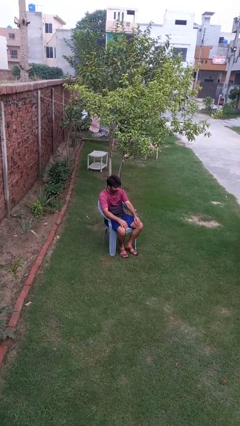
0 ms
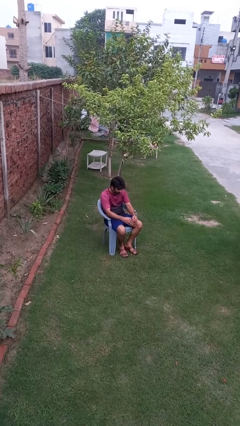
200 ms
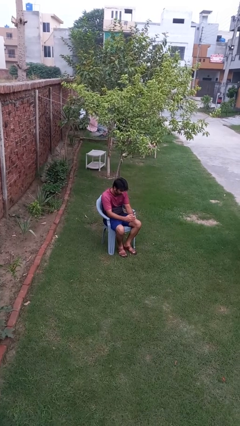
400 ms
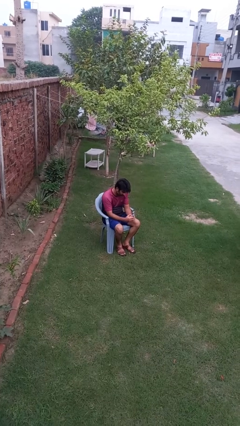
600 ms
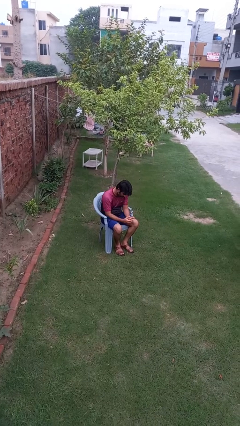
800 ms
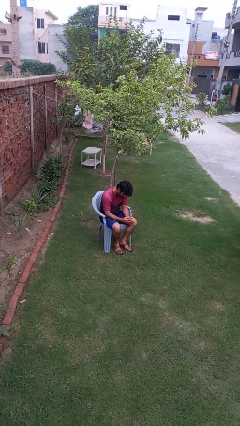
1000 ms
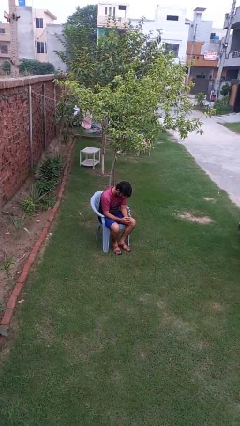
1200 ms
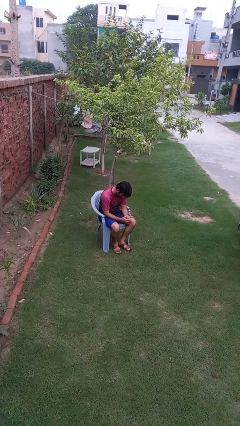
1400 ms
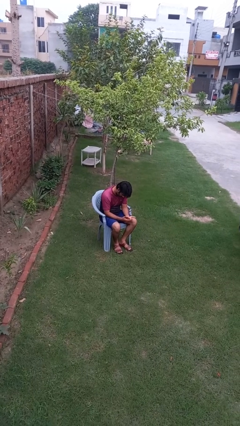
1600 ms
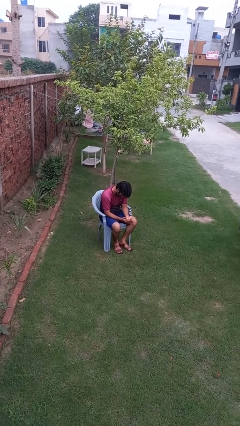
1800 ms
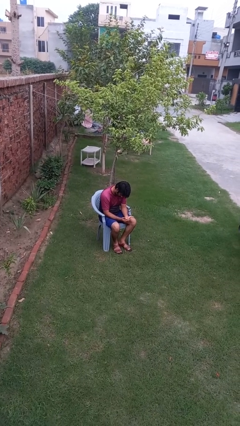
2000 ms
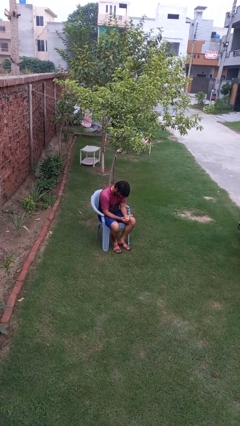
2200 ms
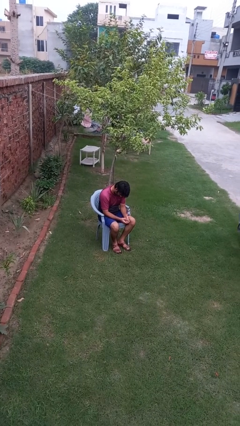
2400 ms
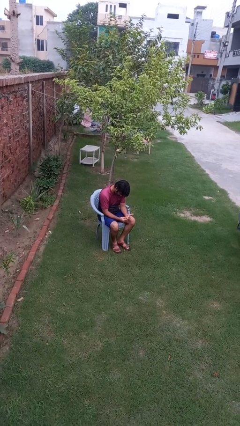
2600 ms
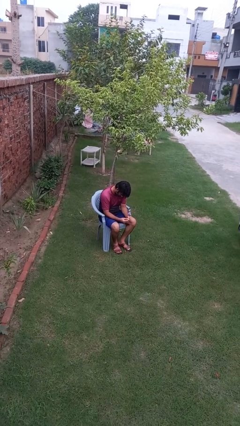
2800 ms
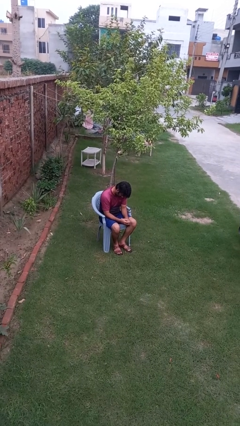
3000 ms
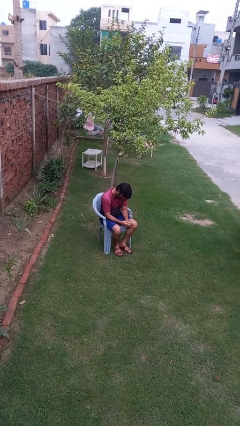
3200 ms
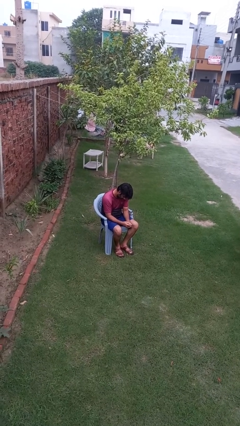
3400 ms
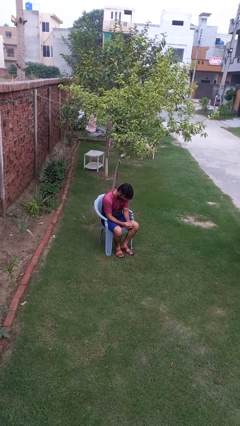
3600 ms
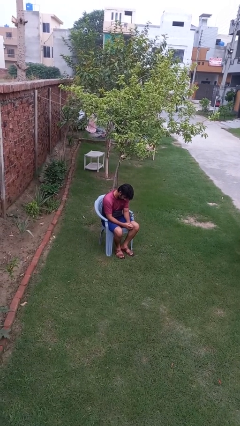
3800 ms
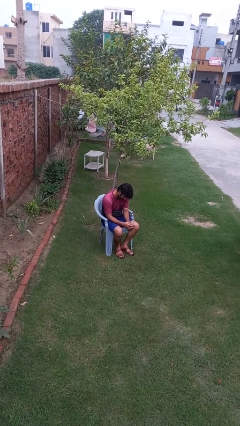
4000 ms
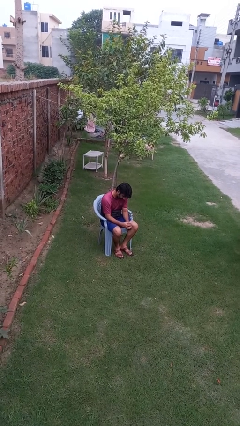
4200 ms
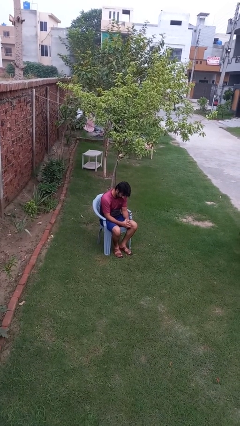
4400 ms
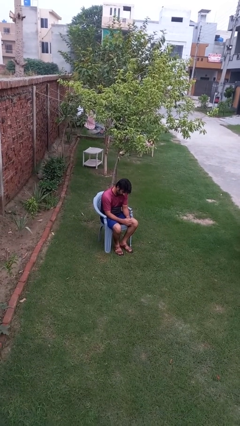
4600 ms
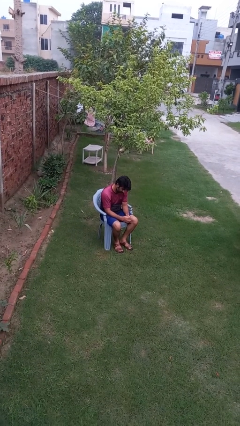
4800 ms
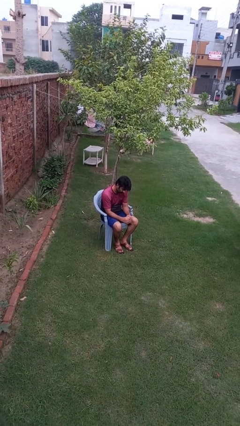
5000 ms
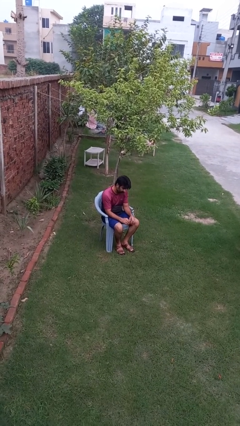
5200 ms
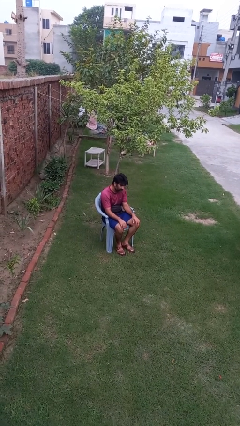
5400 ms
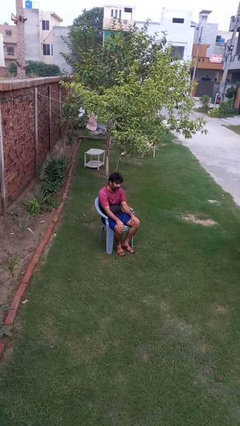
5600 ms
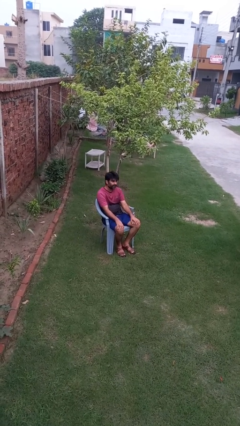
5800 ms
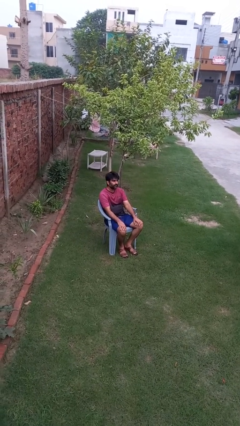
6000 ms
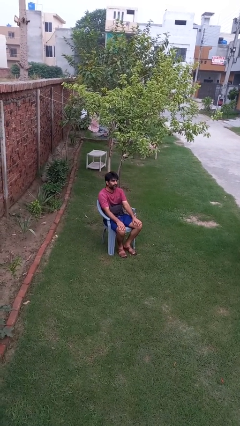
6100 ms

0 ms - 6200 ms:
person looks at hands in lap

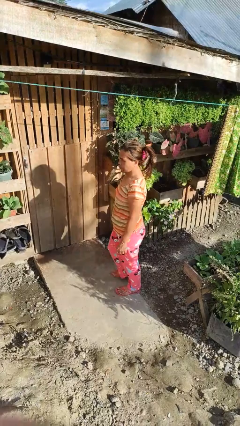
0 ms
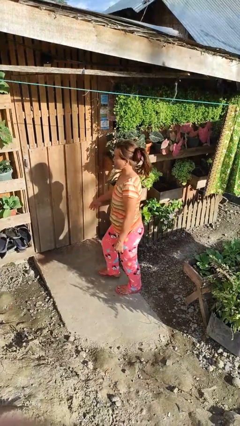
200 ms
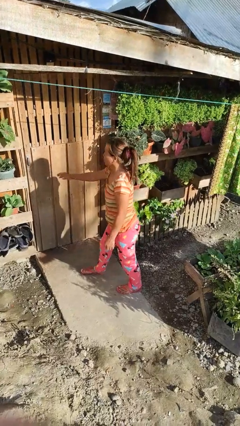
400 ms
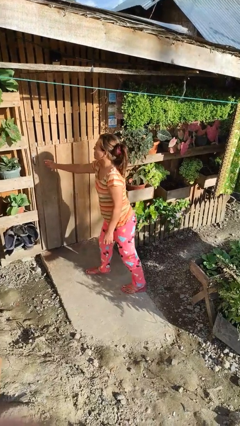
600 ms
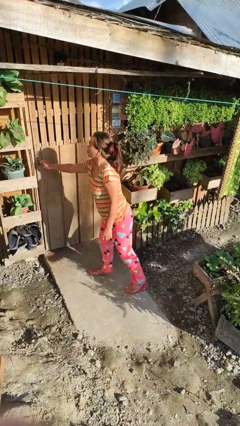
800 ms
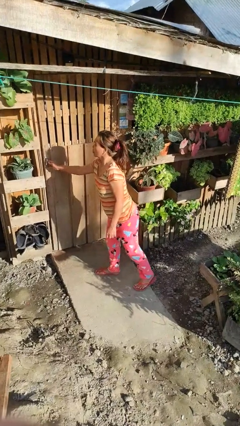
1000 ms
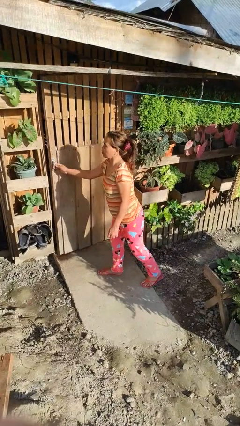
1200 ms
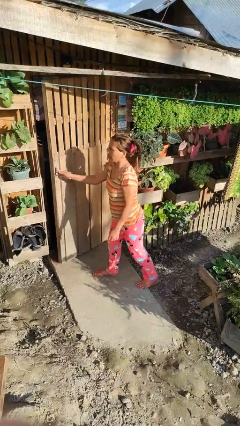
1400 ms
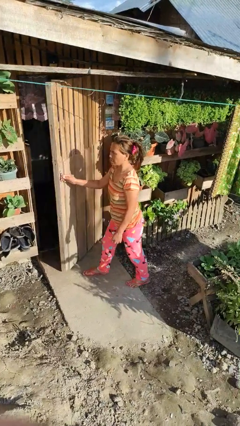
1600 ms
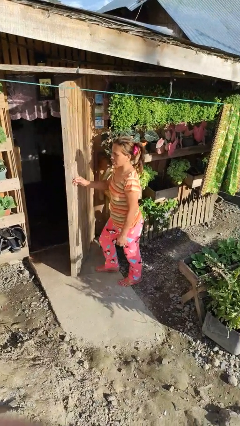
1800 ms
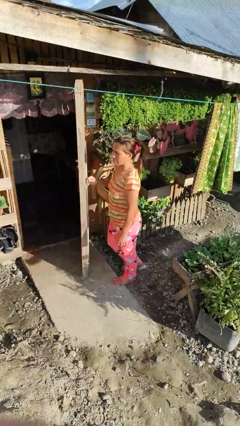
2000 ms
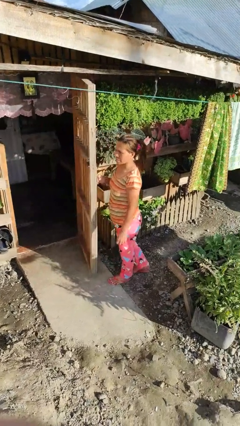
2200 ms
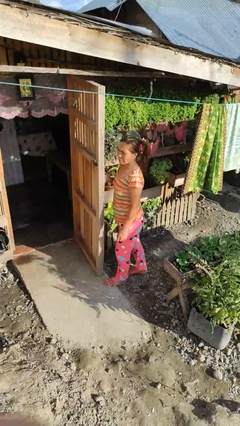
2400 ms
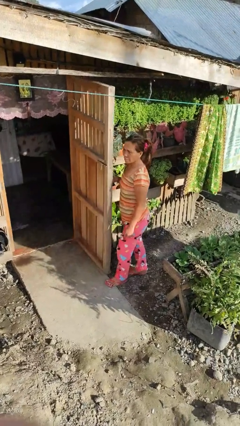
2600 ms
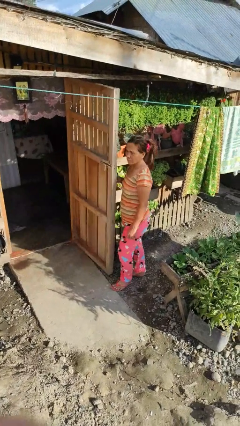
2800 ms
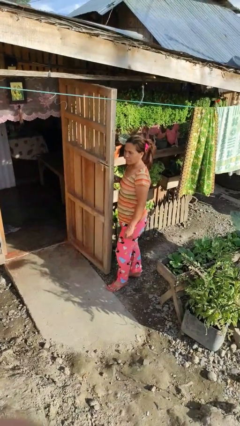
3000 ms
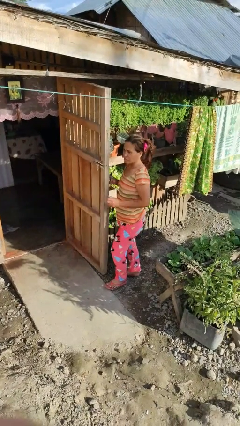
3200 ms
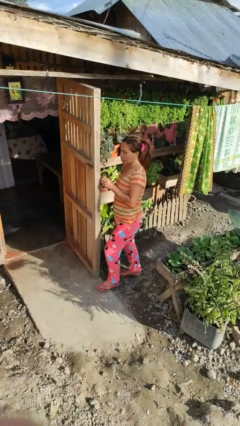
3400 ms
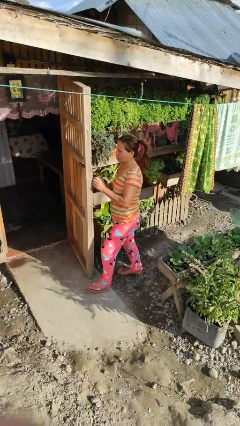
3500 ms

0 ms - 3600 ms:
person opens facility door

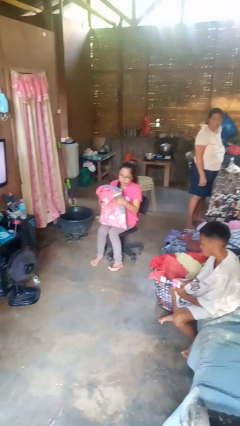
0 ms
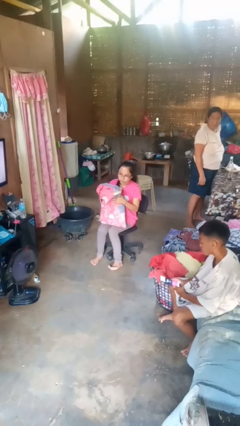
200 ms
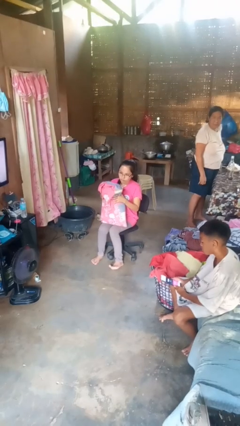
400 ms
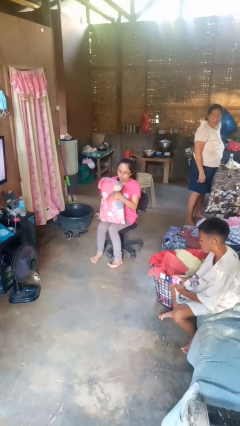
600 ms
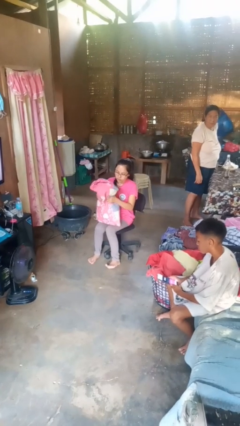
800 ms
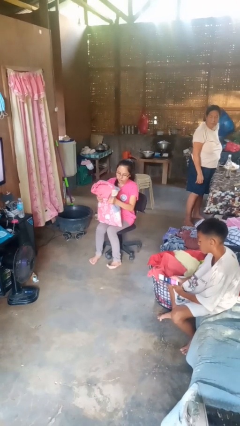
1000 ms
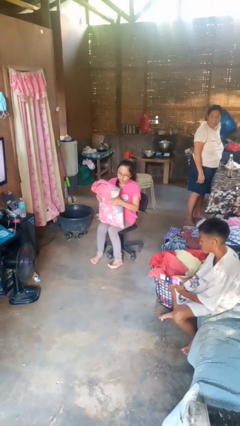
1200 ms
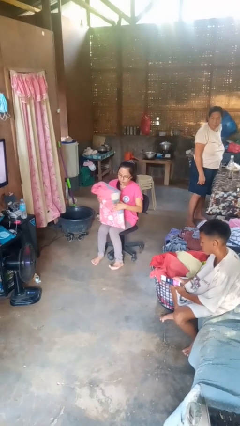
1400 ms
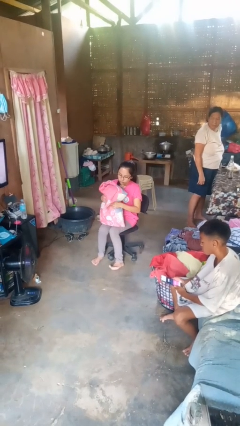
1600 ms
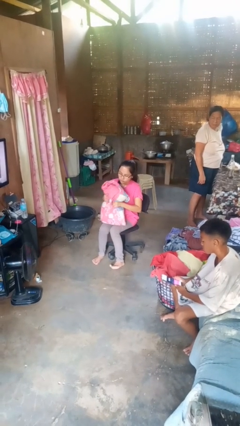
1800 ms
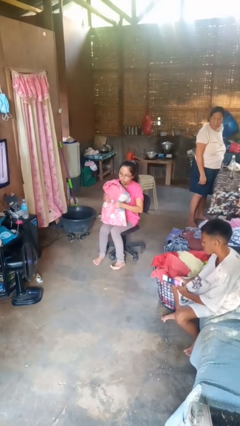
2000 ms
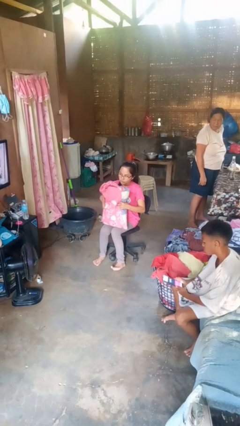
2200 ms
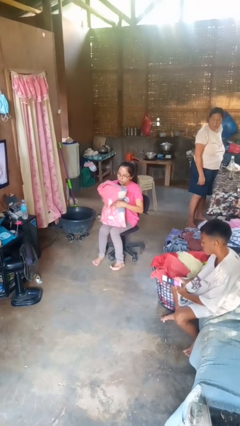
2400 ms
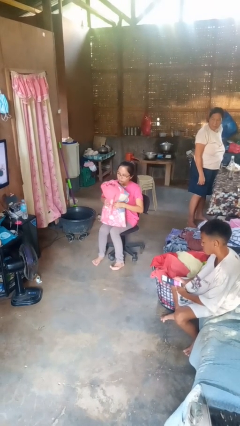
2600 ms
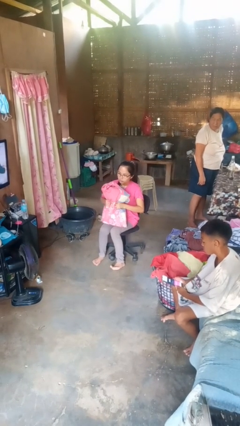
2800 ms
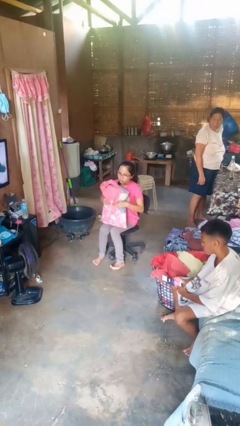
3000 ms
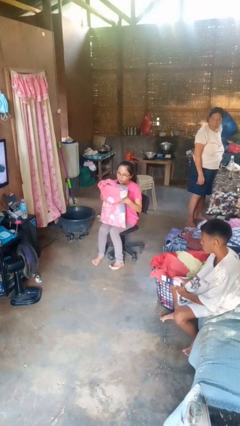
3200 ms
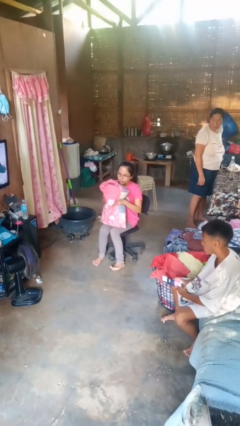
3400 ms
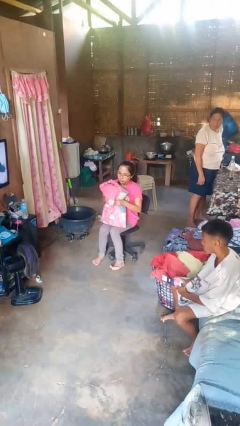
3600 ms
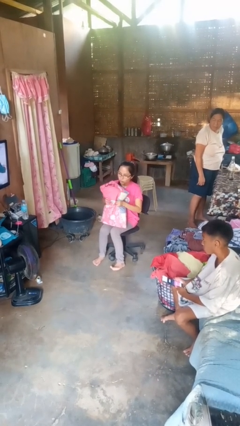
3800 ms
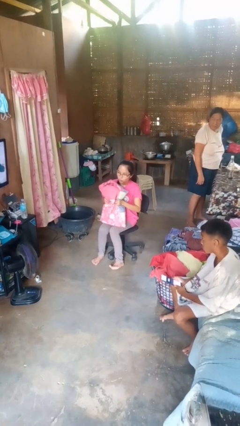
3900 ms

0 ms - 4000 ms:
person squeezes object

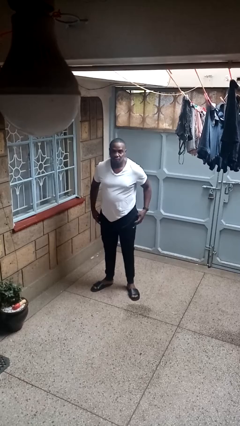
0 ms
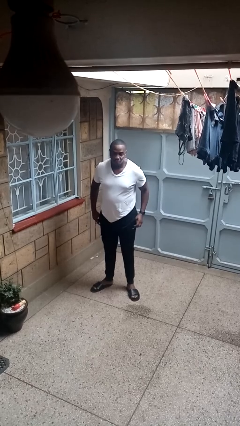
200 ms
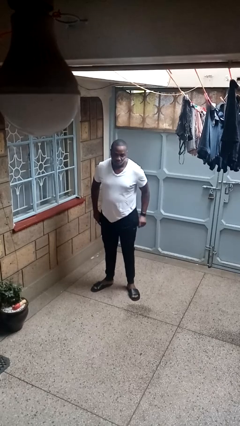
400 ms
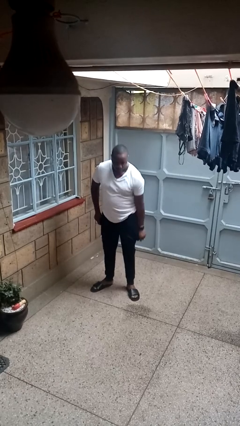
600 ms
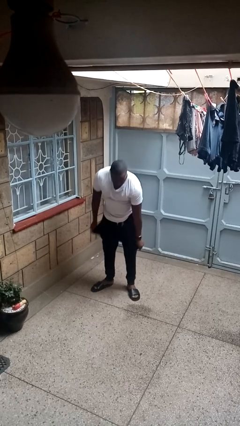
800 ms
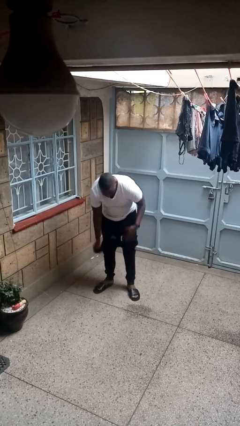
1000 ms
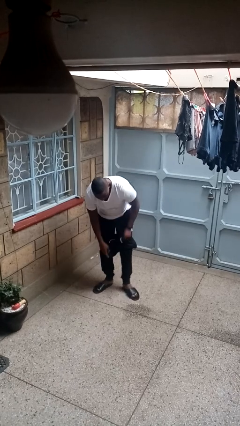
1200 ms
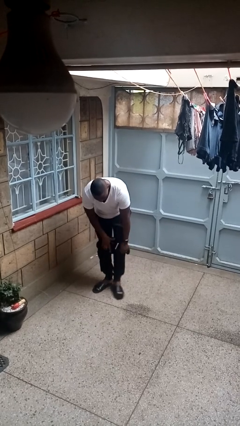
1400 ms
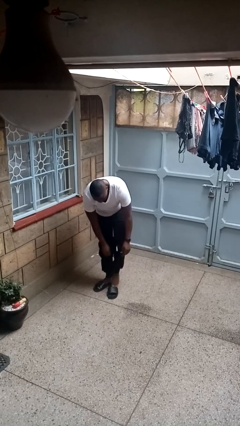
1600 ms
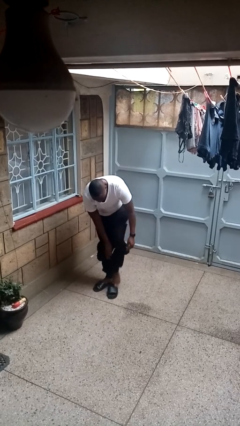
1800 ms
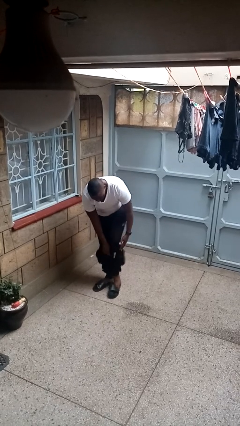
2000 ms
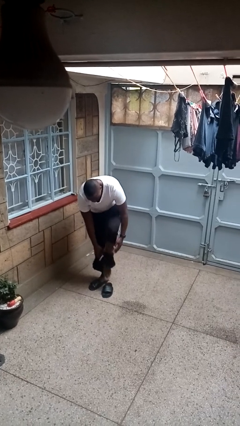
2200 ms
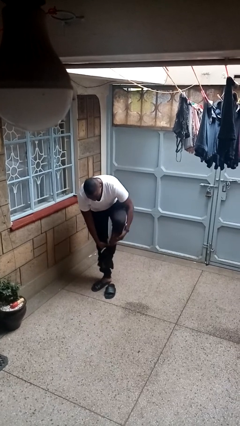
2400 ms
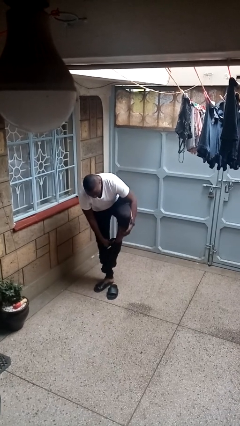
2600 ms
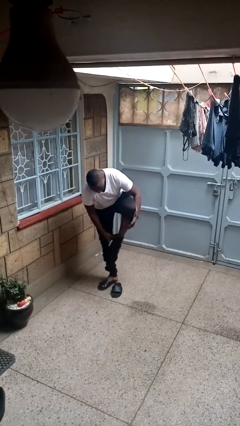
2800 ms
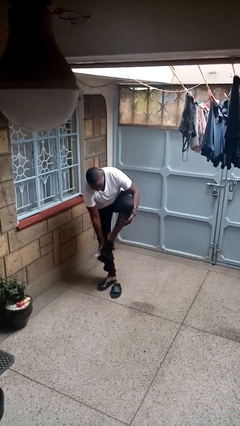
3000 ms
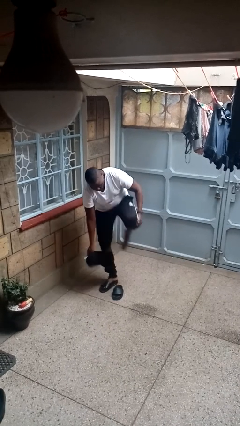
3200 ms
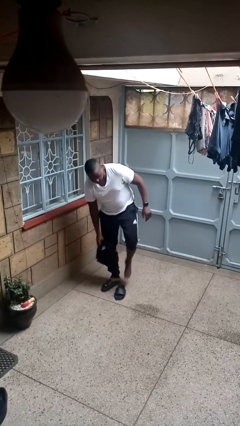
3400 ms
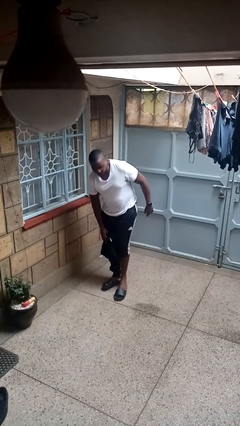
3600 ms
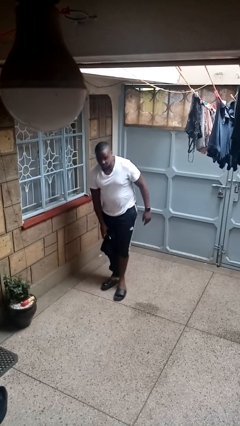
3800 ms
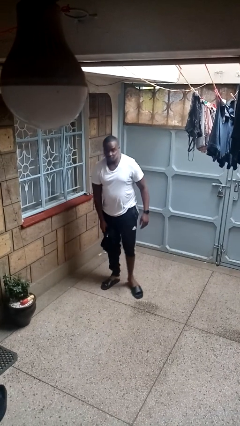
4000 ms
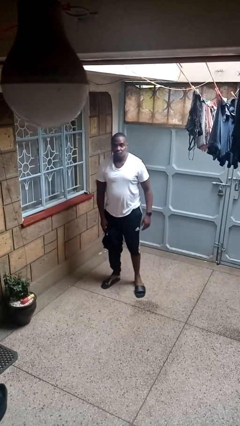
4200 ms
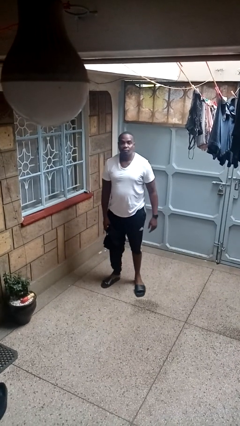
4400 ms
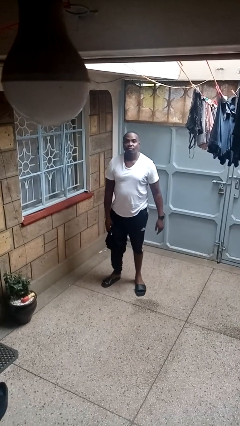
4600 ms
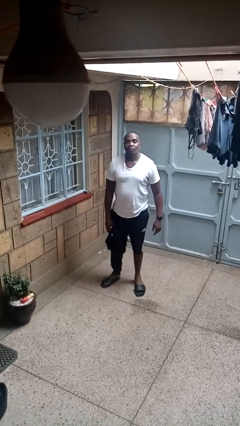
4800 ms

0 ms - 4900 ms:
person takes off pants
